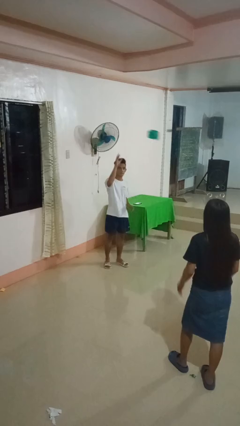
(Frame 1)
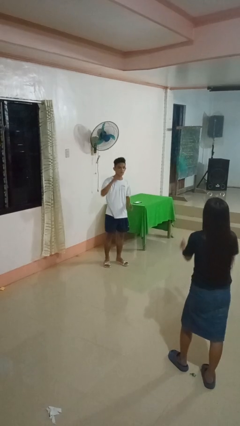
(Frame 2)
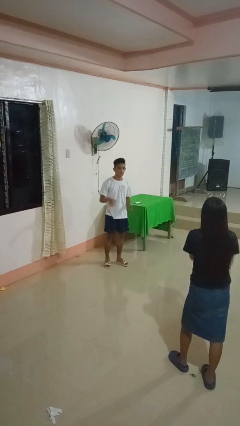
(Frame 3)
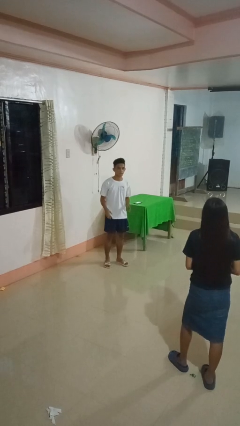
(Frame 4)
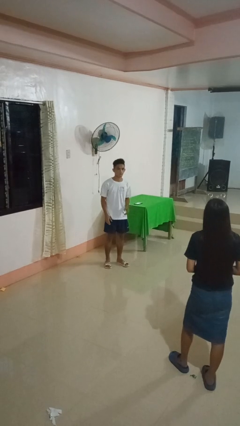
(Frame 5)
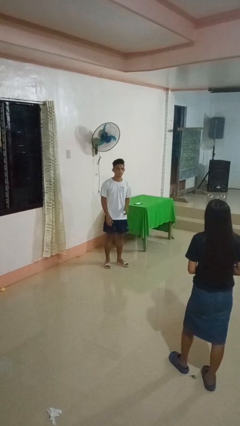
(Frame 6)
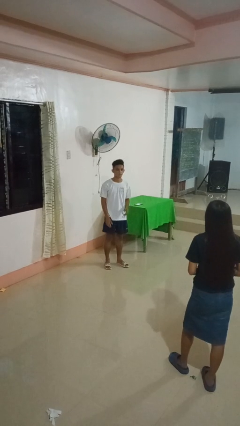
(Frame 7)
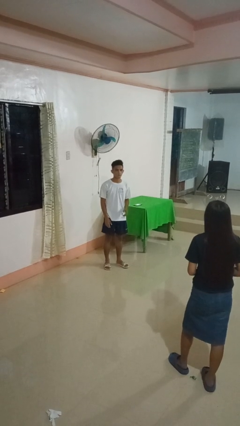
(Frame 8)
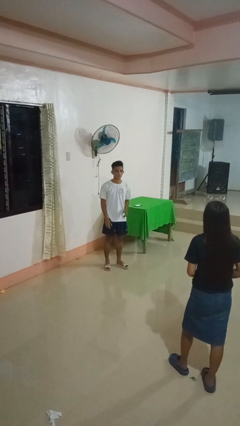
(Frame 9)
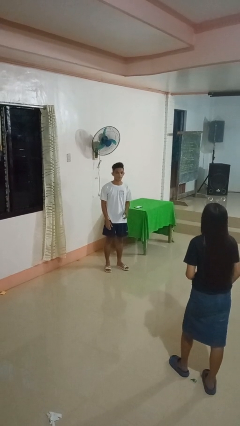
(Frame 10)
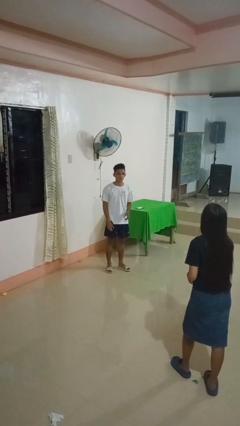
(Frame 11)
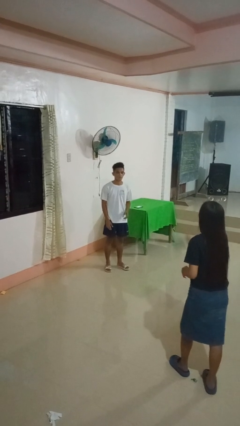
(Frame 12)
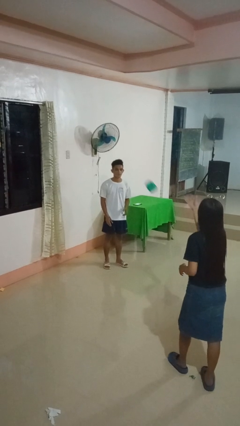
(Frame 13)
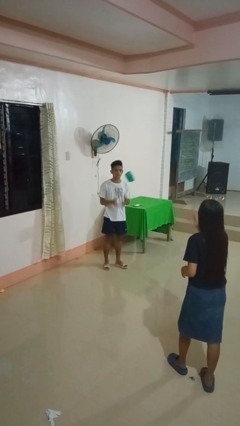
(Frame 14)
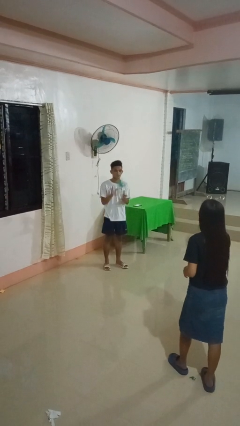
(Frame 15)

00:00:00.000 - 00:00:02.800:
person throws object to person

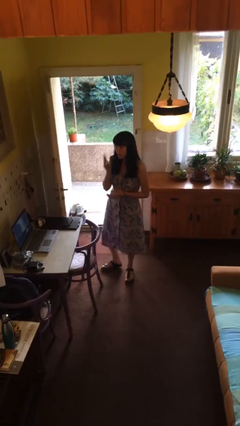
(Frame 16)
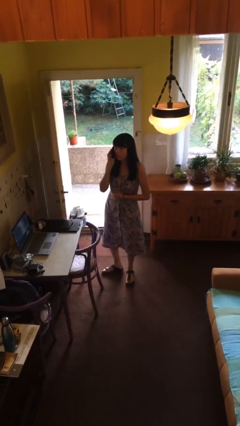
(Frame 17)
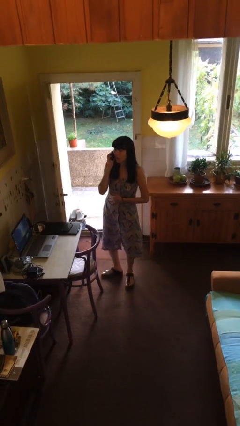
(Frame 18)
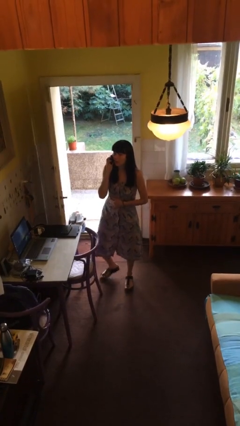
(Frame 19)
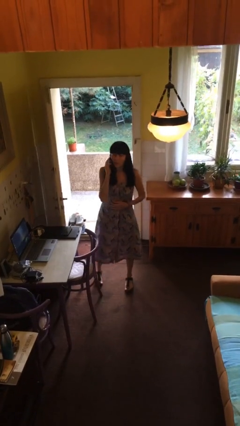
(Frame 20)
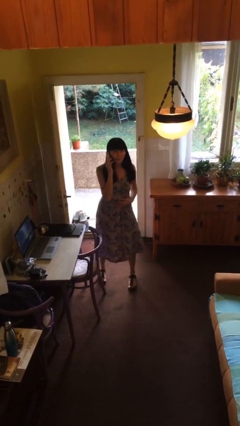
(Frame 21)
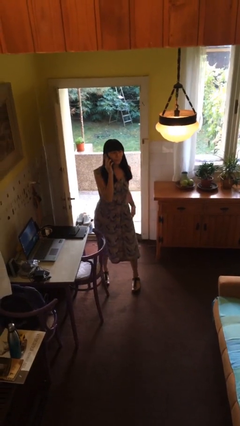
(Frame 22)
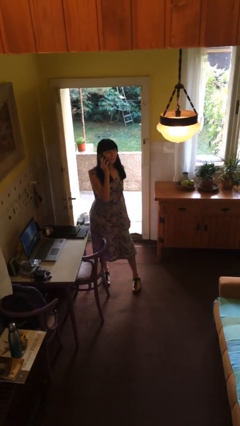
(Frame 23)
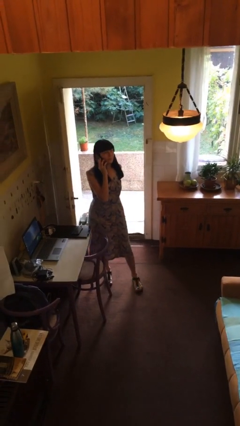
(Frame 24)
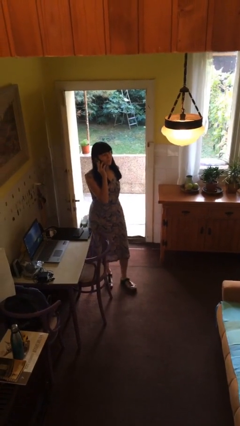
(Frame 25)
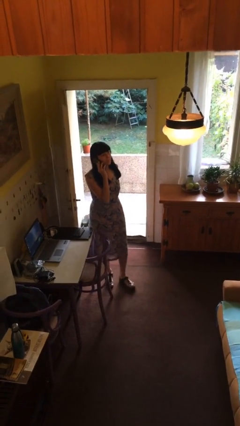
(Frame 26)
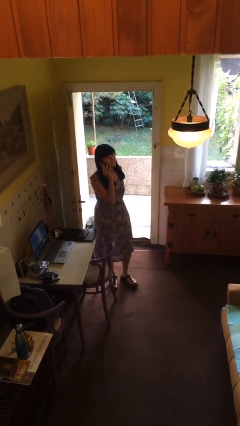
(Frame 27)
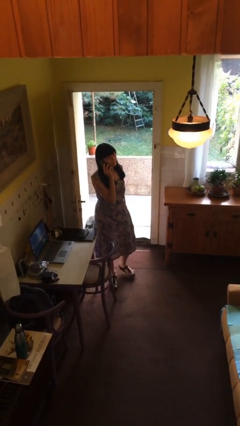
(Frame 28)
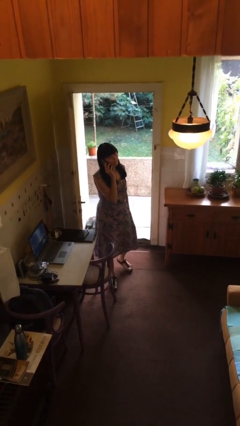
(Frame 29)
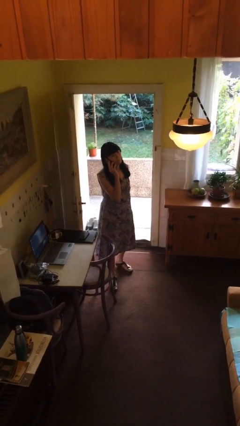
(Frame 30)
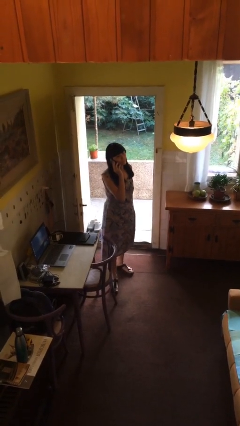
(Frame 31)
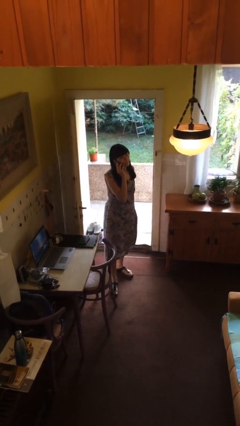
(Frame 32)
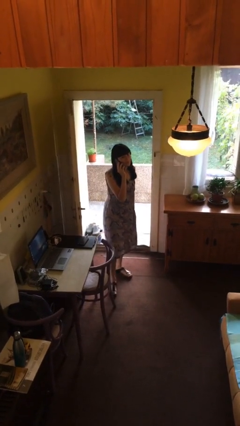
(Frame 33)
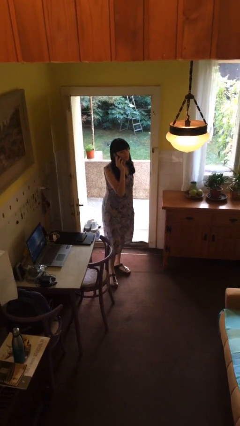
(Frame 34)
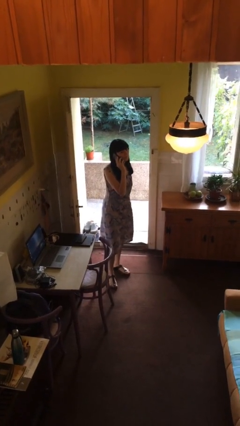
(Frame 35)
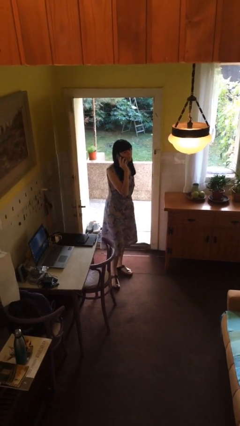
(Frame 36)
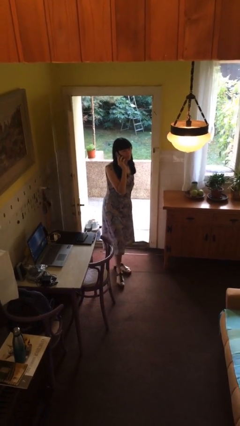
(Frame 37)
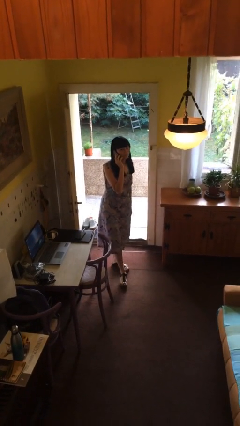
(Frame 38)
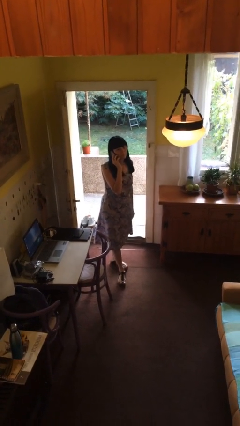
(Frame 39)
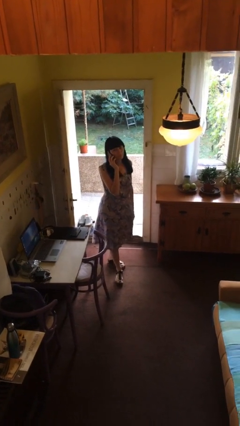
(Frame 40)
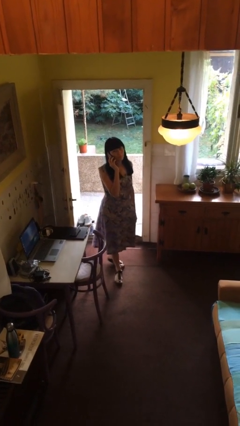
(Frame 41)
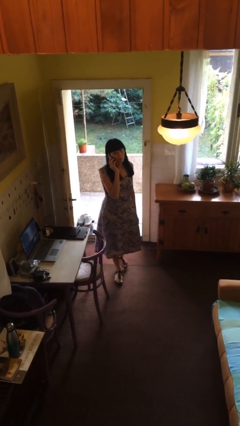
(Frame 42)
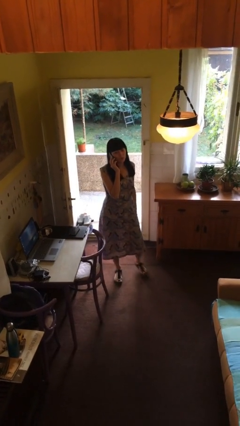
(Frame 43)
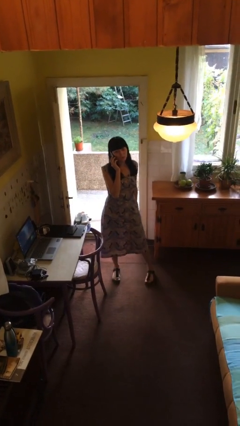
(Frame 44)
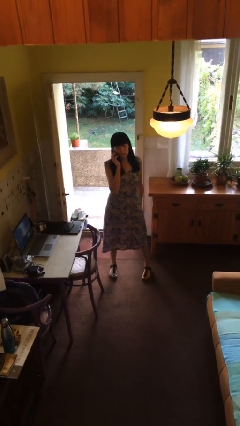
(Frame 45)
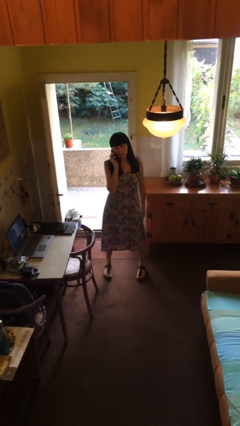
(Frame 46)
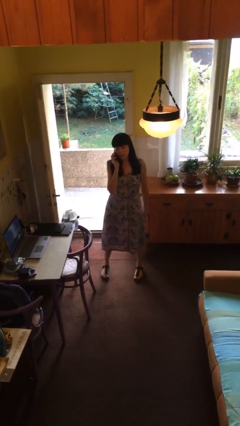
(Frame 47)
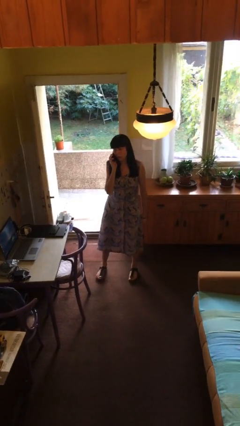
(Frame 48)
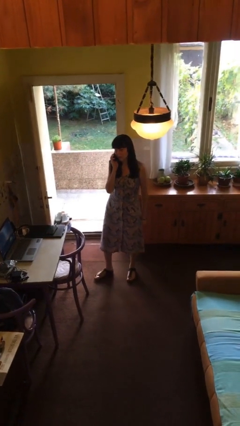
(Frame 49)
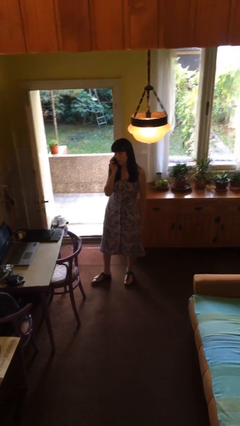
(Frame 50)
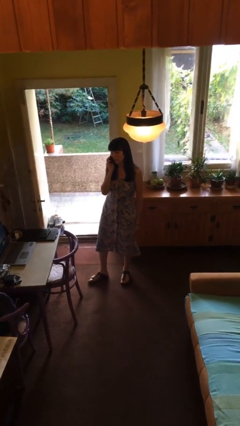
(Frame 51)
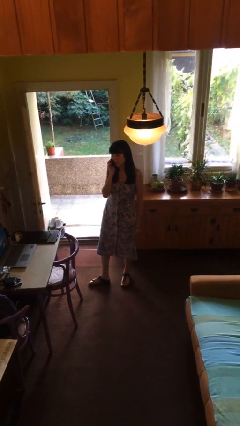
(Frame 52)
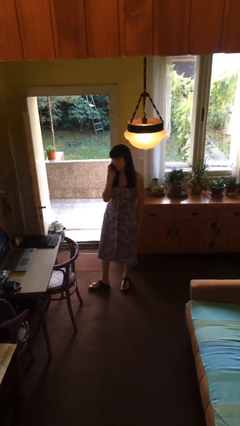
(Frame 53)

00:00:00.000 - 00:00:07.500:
person talks on phone

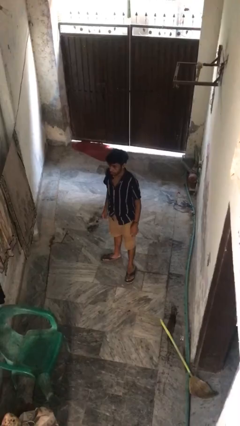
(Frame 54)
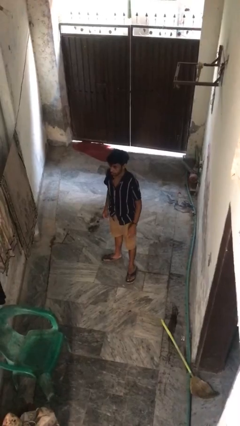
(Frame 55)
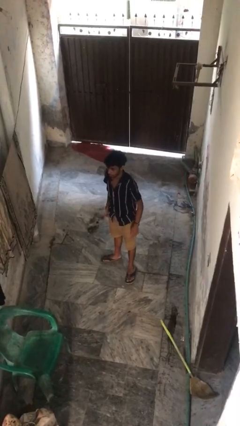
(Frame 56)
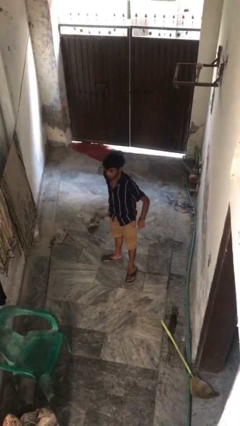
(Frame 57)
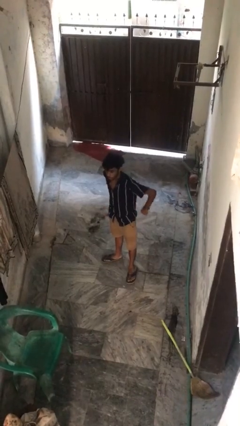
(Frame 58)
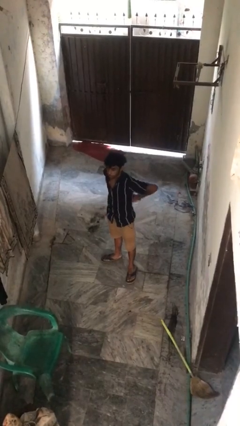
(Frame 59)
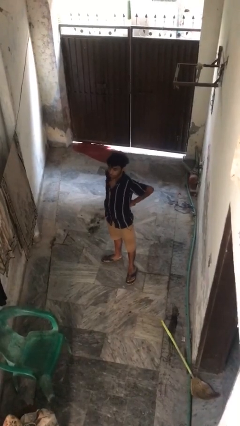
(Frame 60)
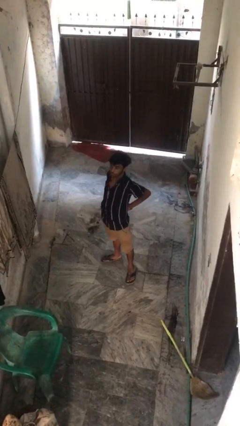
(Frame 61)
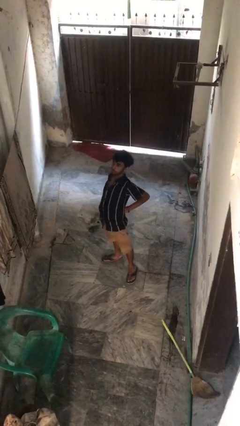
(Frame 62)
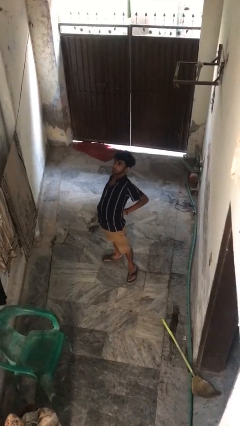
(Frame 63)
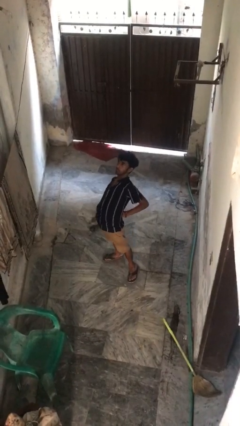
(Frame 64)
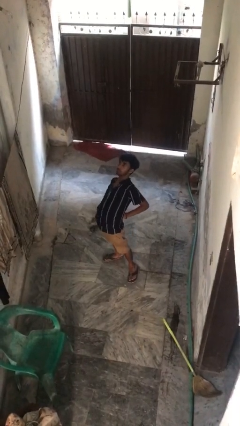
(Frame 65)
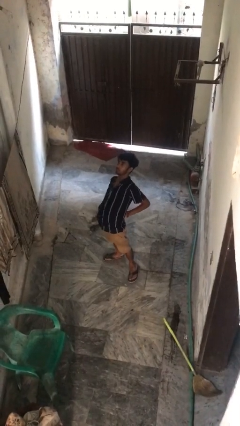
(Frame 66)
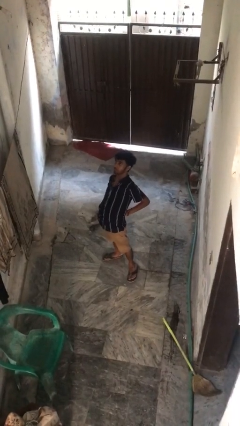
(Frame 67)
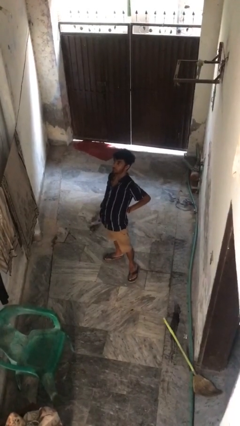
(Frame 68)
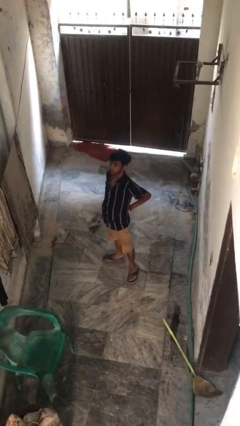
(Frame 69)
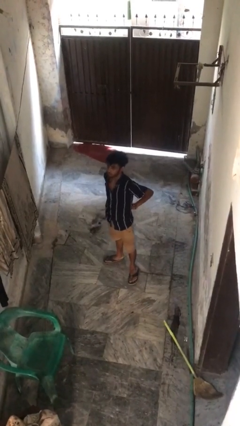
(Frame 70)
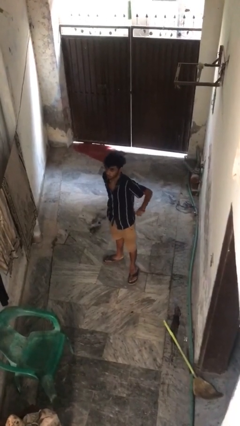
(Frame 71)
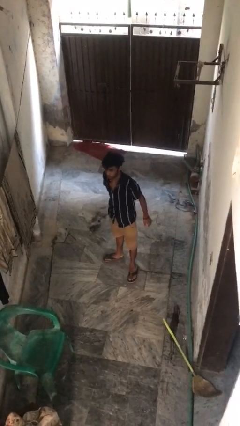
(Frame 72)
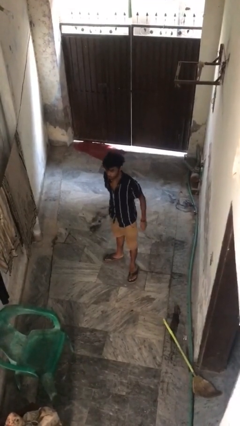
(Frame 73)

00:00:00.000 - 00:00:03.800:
person stretches back

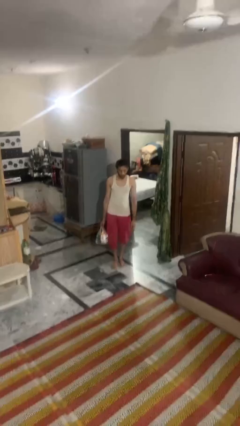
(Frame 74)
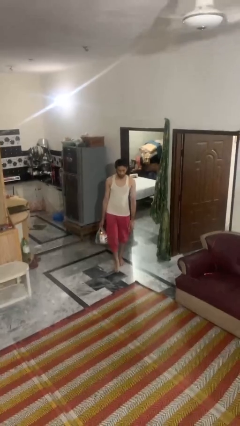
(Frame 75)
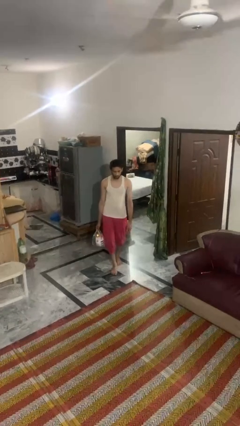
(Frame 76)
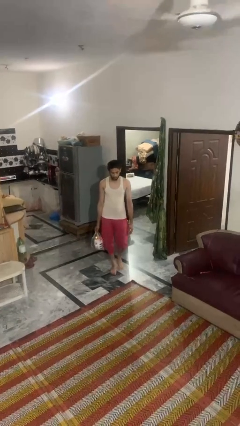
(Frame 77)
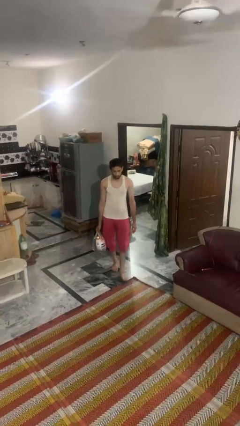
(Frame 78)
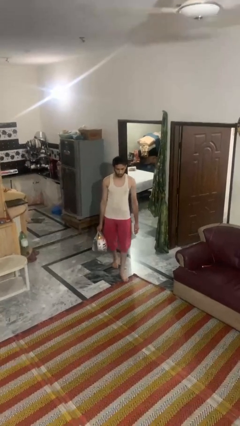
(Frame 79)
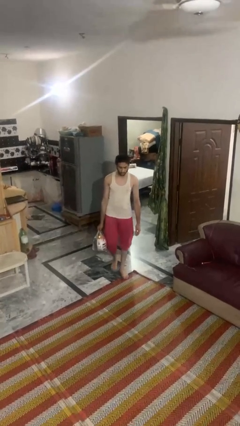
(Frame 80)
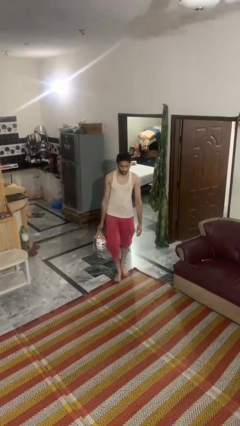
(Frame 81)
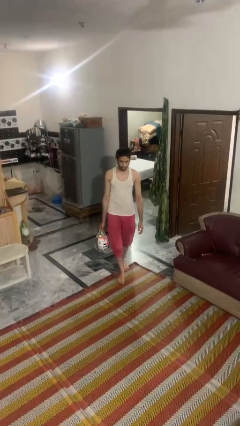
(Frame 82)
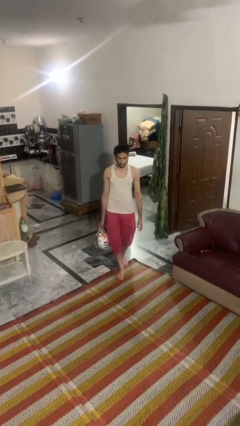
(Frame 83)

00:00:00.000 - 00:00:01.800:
person carries groceries

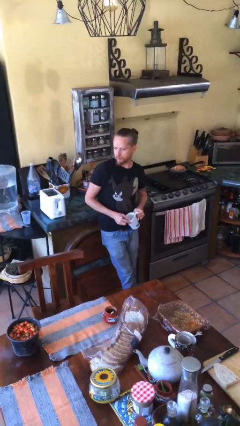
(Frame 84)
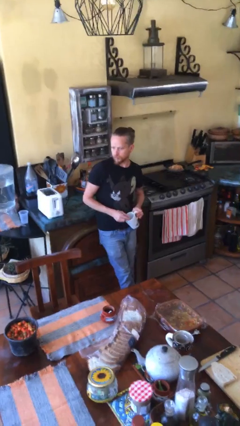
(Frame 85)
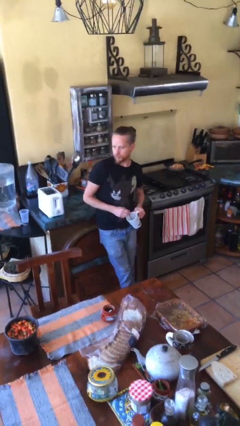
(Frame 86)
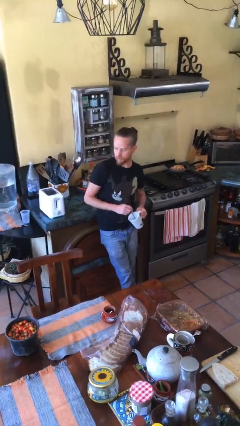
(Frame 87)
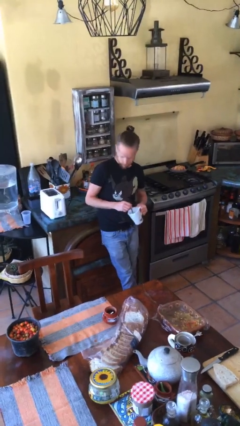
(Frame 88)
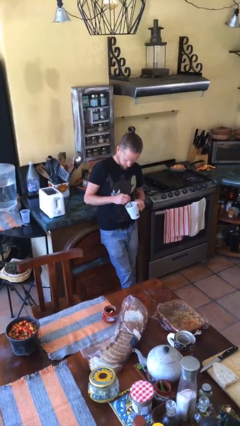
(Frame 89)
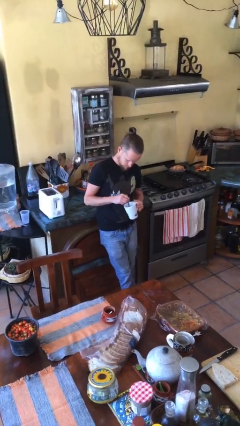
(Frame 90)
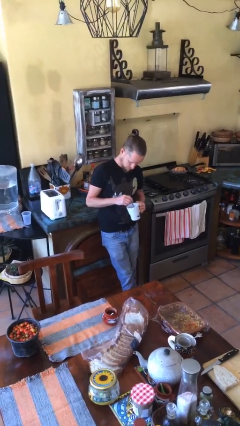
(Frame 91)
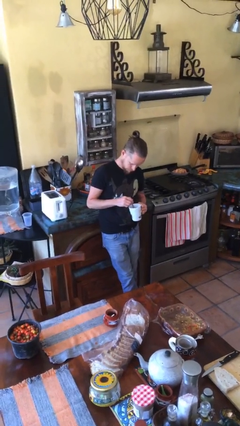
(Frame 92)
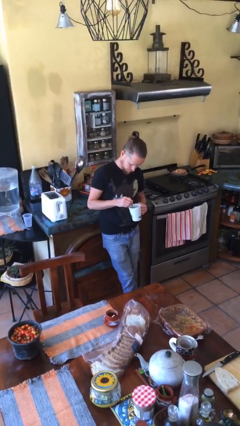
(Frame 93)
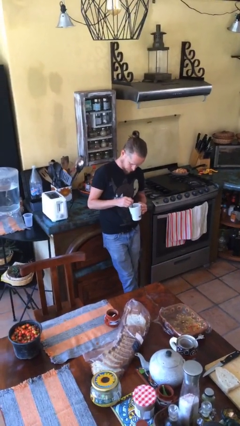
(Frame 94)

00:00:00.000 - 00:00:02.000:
person stirs mug
